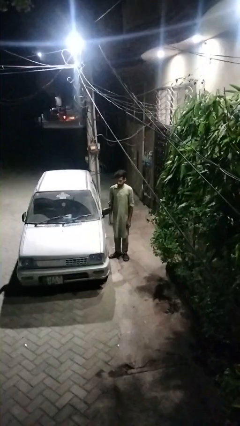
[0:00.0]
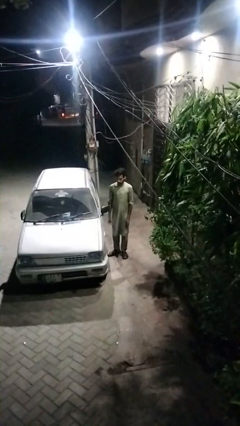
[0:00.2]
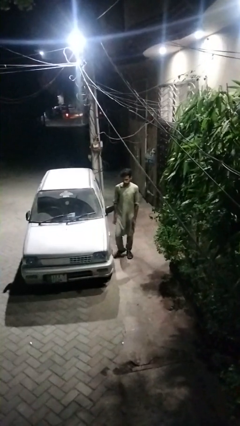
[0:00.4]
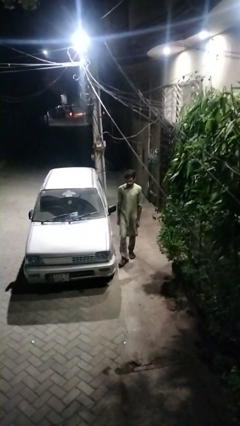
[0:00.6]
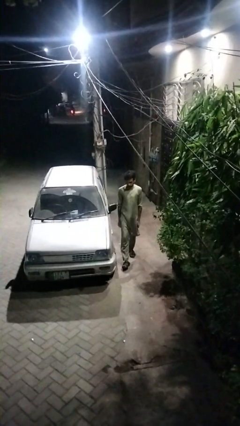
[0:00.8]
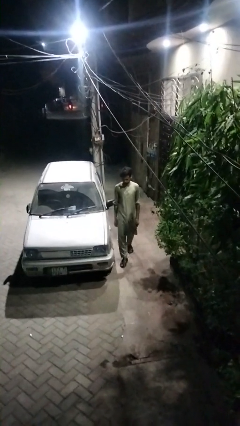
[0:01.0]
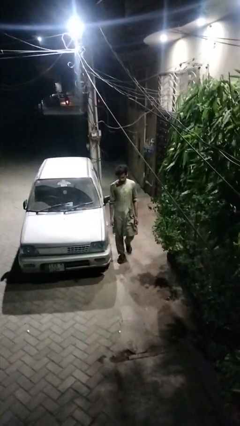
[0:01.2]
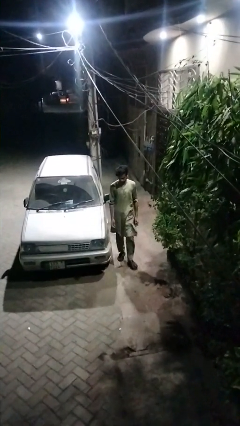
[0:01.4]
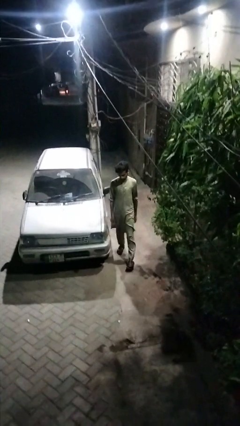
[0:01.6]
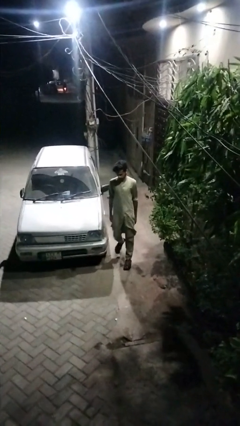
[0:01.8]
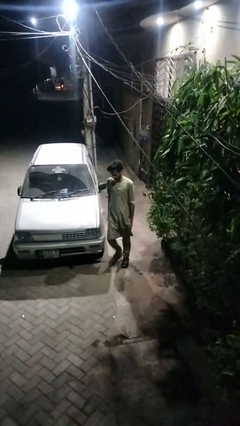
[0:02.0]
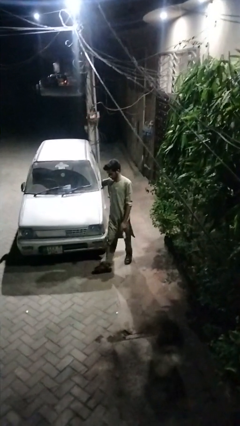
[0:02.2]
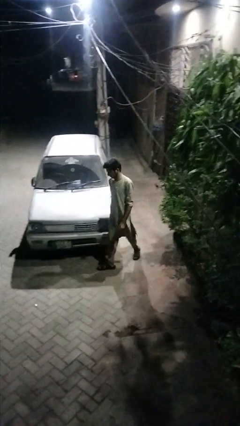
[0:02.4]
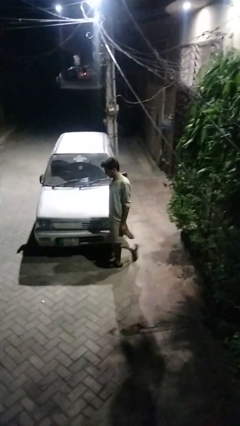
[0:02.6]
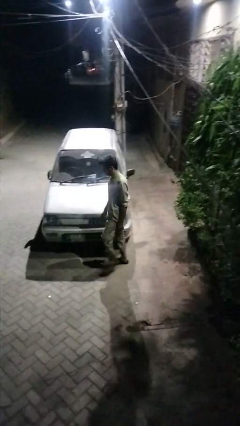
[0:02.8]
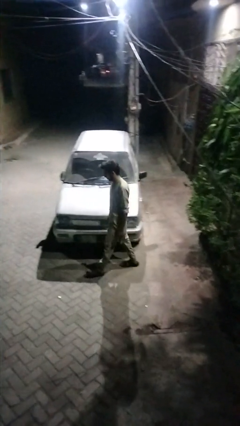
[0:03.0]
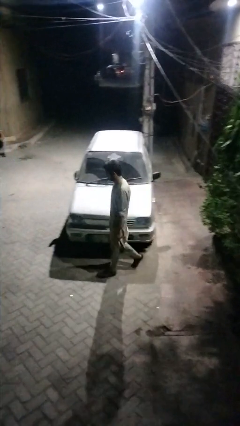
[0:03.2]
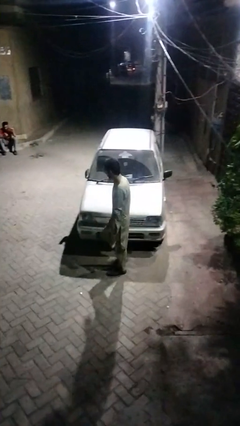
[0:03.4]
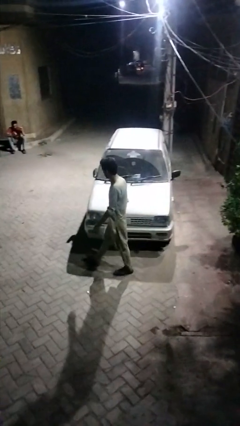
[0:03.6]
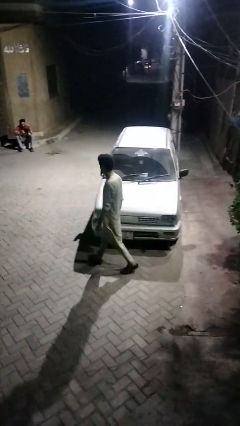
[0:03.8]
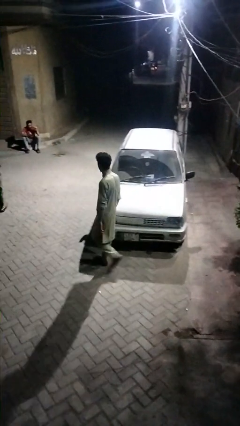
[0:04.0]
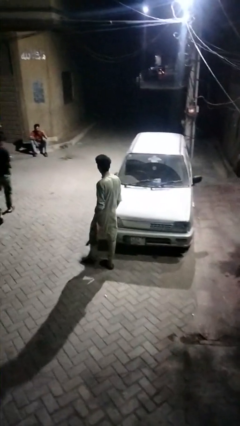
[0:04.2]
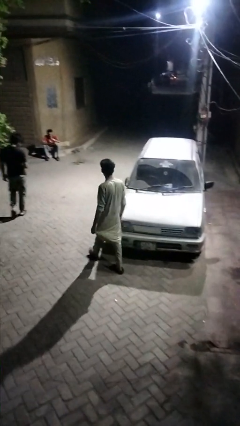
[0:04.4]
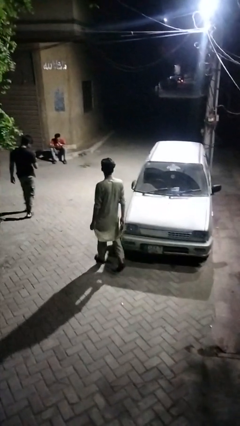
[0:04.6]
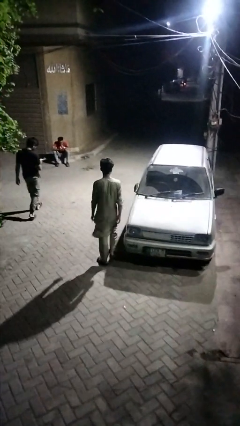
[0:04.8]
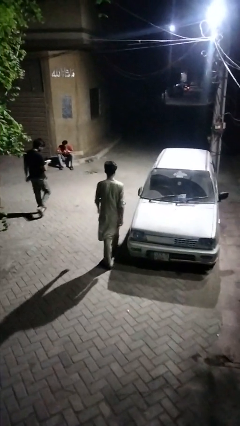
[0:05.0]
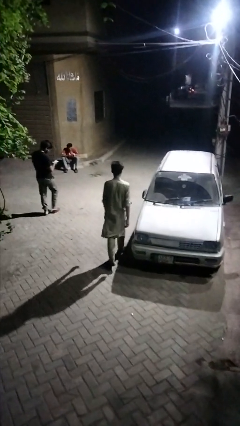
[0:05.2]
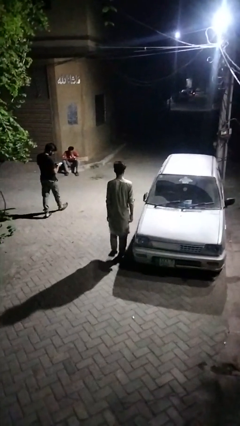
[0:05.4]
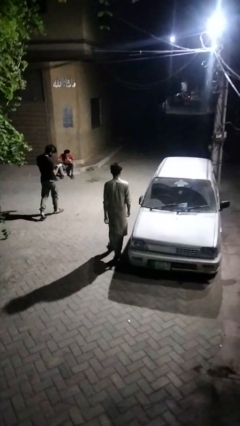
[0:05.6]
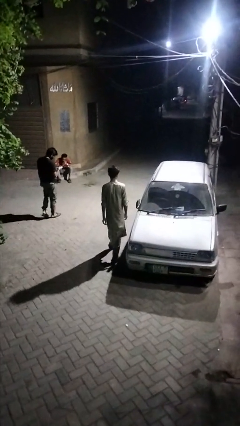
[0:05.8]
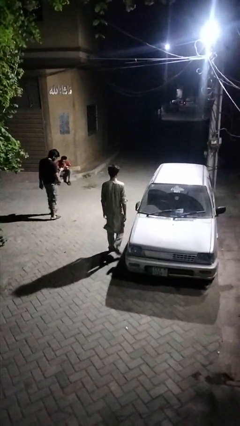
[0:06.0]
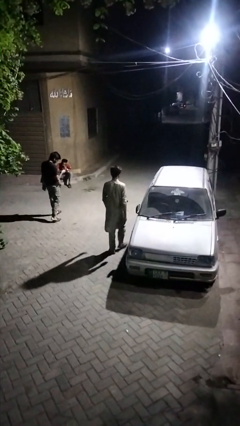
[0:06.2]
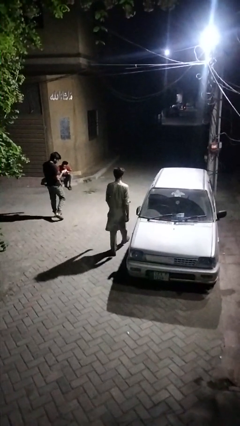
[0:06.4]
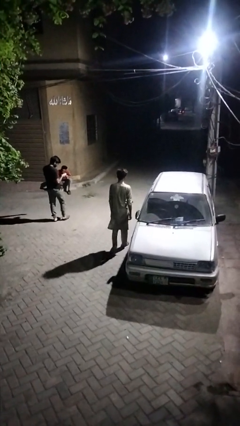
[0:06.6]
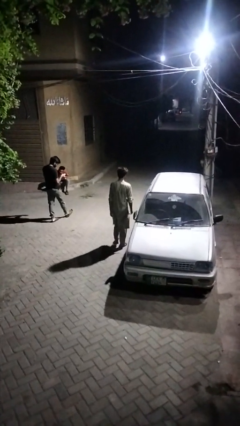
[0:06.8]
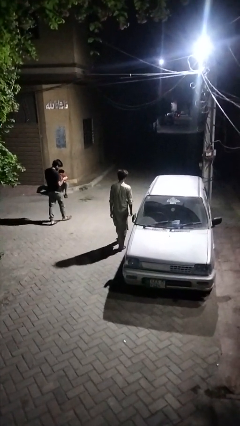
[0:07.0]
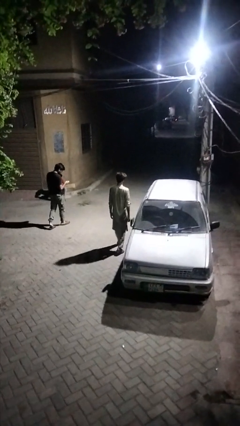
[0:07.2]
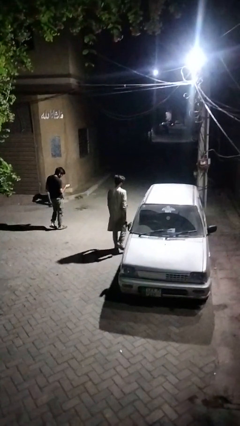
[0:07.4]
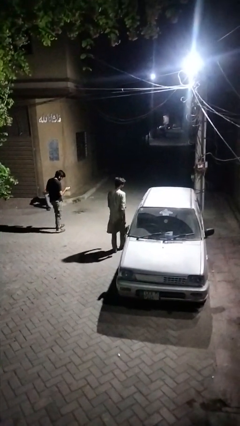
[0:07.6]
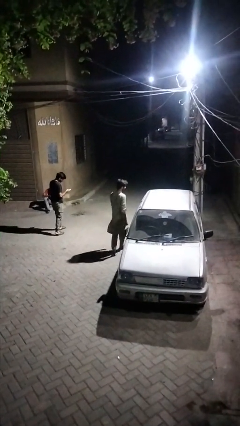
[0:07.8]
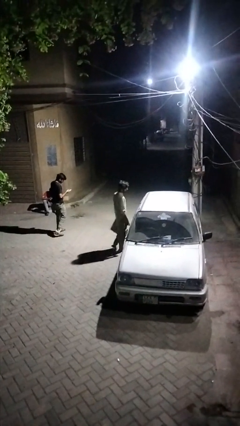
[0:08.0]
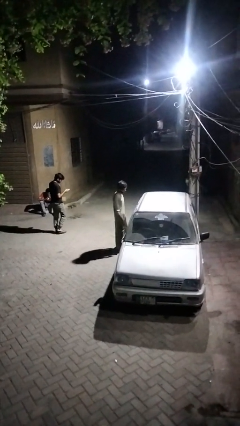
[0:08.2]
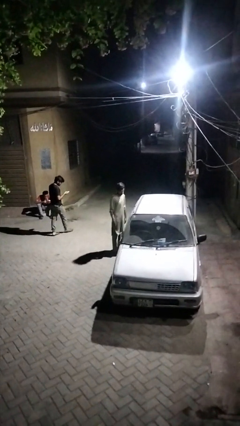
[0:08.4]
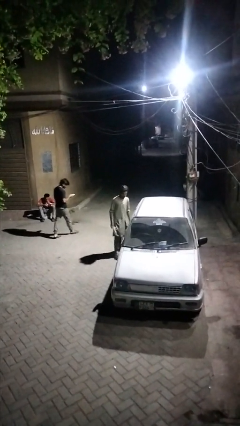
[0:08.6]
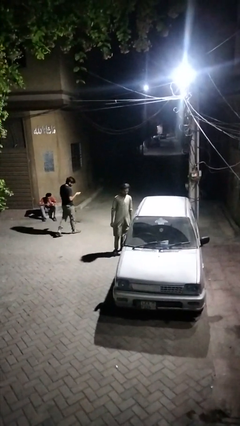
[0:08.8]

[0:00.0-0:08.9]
person walks around car

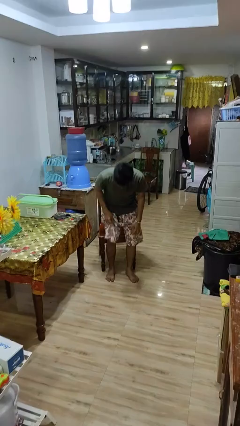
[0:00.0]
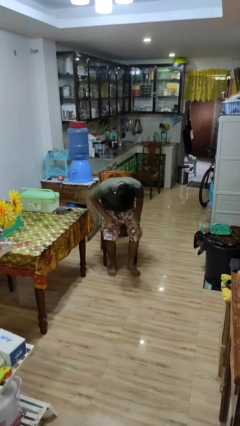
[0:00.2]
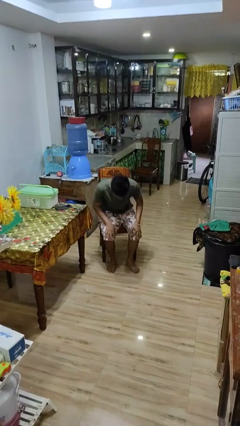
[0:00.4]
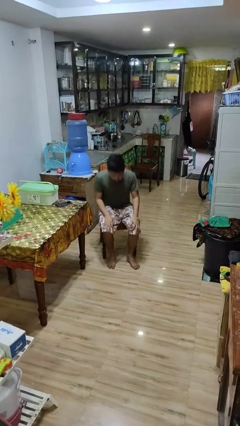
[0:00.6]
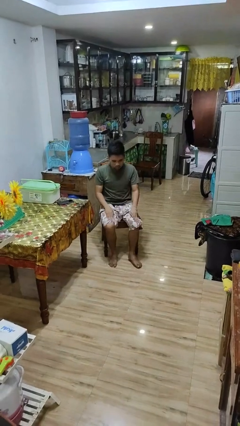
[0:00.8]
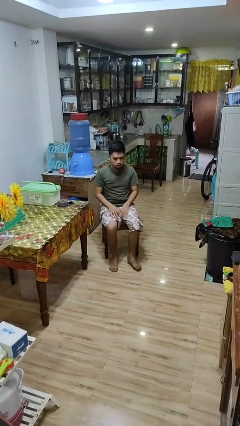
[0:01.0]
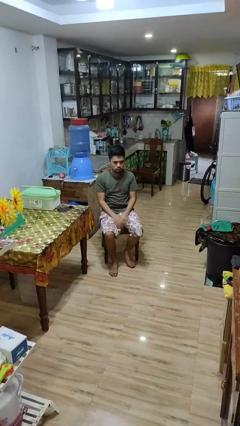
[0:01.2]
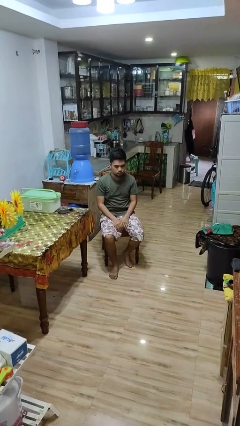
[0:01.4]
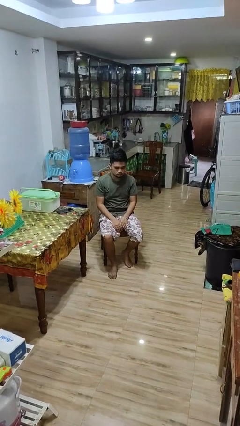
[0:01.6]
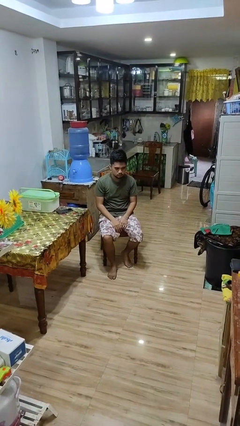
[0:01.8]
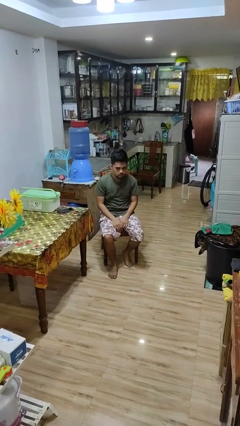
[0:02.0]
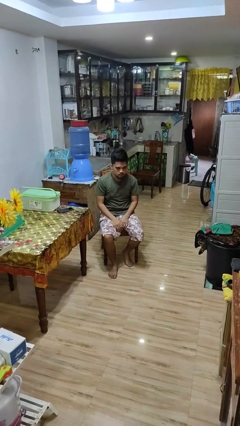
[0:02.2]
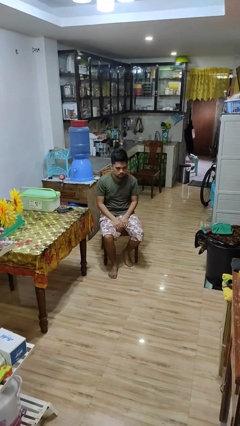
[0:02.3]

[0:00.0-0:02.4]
person sits down

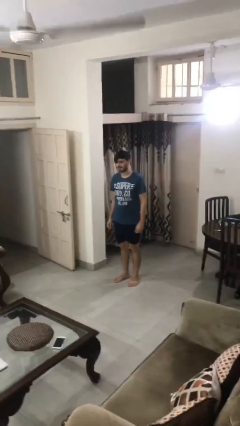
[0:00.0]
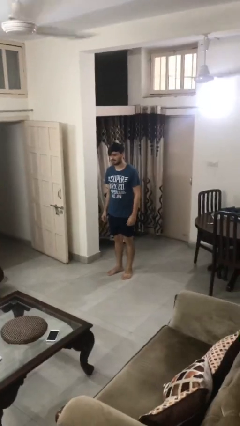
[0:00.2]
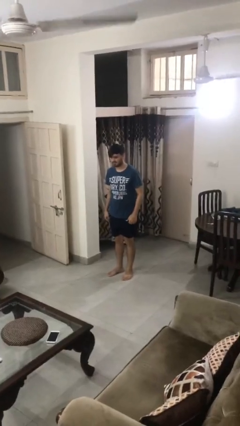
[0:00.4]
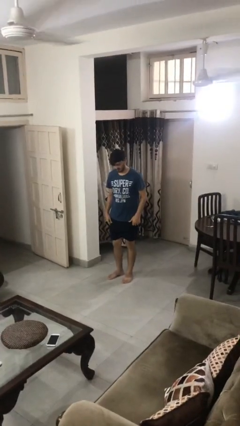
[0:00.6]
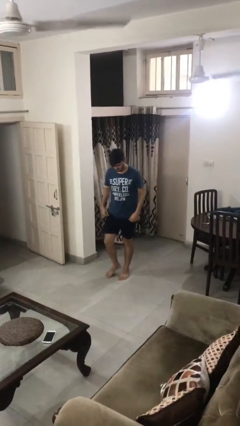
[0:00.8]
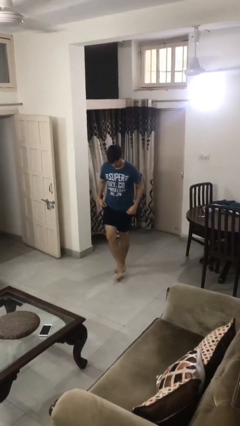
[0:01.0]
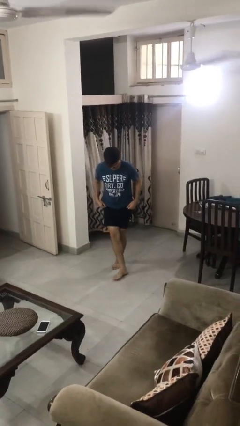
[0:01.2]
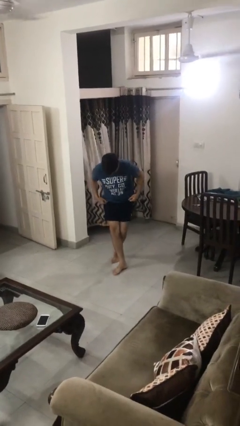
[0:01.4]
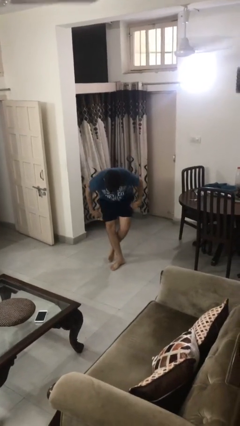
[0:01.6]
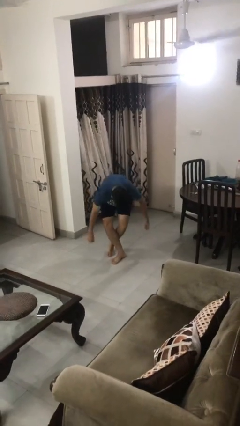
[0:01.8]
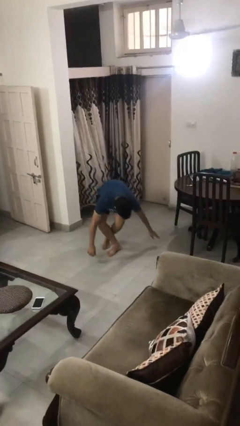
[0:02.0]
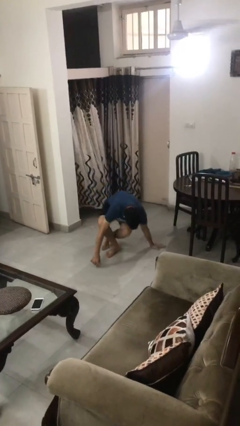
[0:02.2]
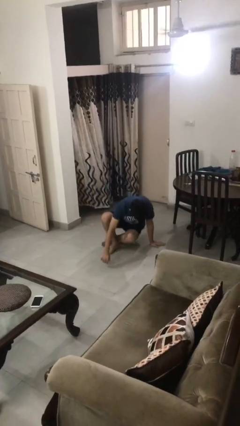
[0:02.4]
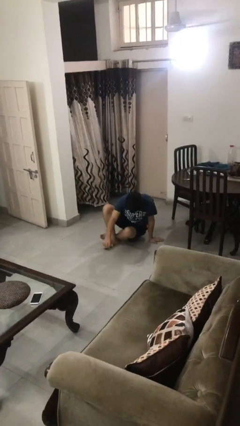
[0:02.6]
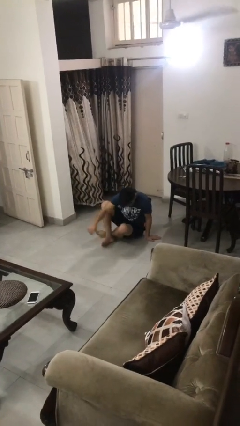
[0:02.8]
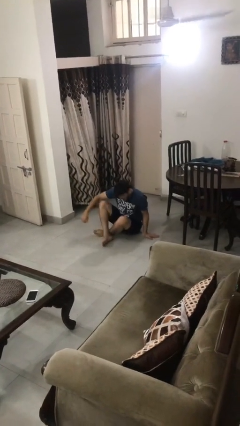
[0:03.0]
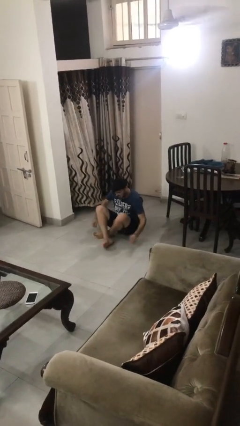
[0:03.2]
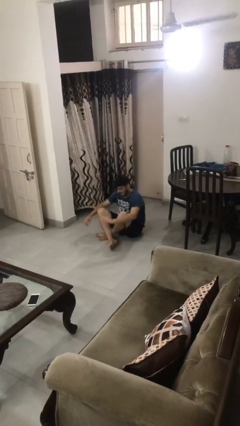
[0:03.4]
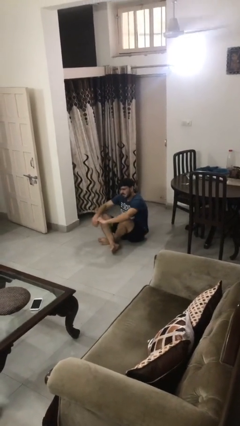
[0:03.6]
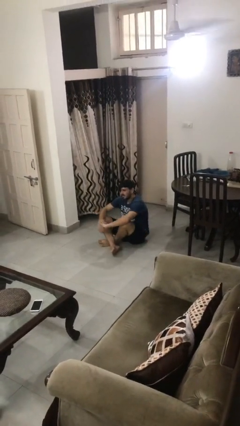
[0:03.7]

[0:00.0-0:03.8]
person sits crisscross

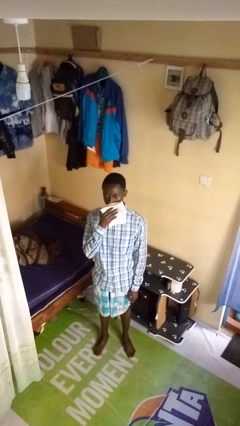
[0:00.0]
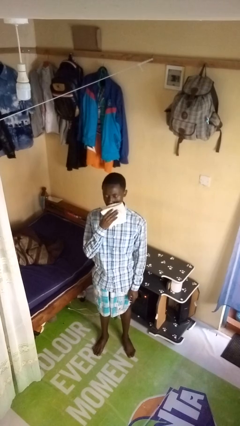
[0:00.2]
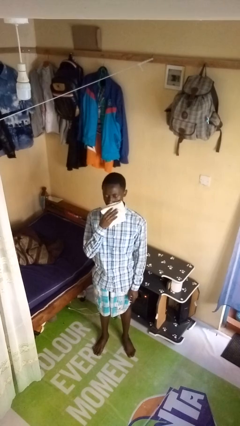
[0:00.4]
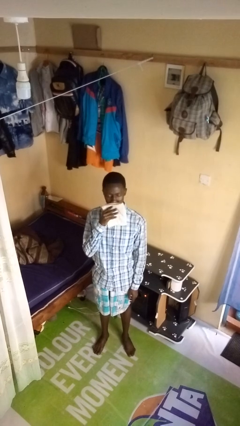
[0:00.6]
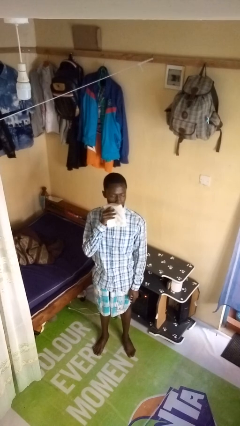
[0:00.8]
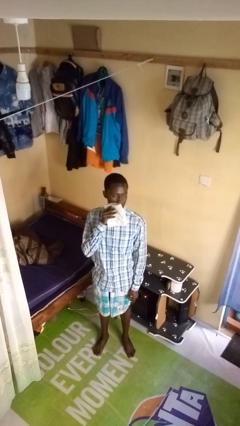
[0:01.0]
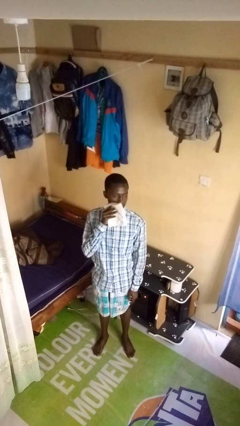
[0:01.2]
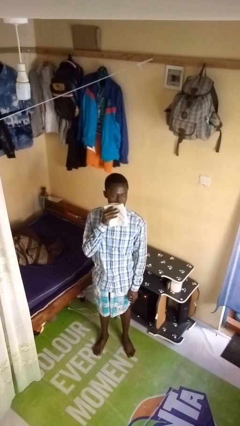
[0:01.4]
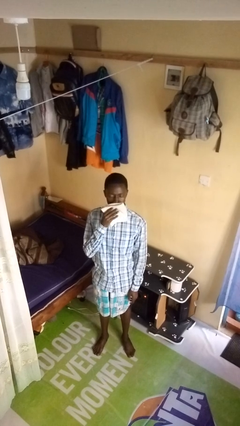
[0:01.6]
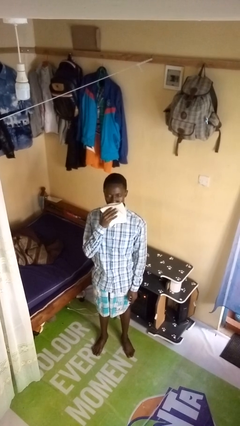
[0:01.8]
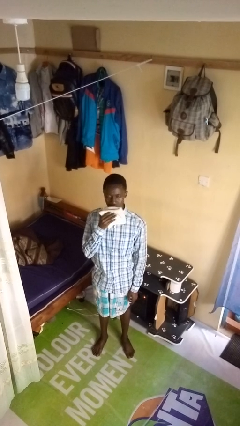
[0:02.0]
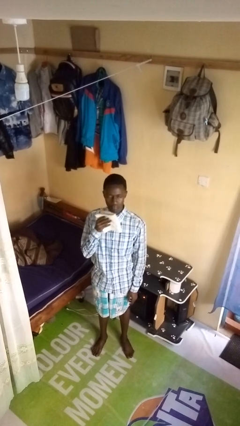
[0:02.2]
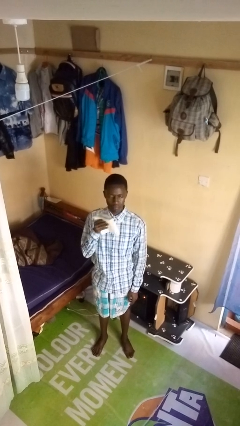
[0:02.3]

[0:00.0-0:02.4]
person wipes mouth with napkin

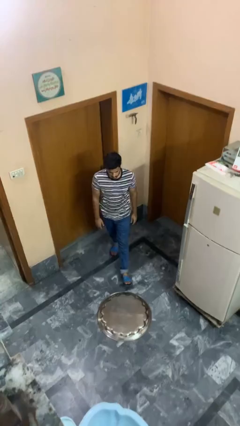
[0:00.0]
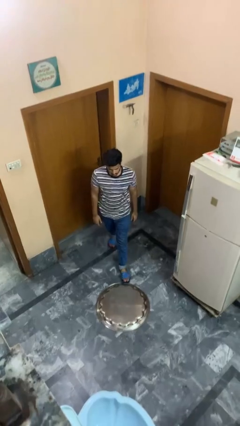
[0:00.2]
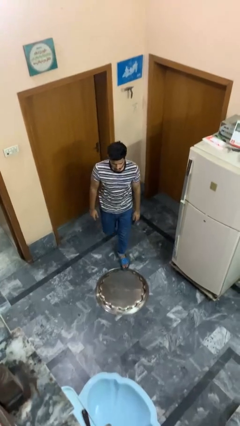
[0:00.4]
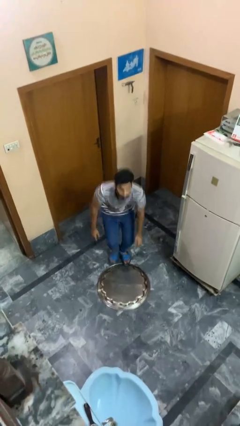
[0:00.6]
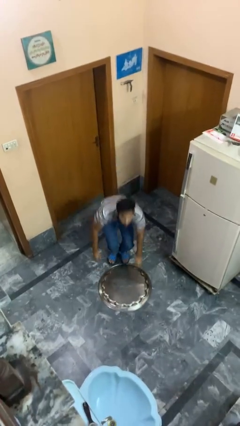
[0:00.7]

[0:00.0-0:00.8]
person trips on object on floor
